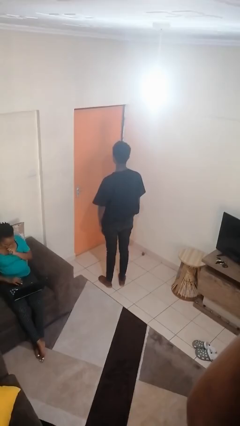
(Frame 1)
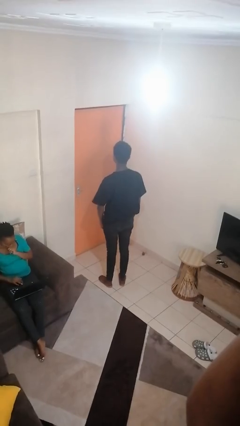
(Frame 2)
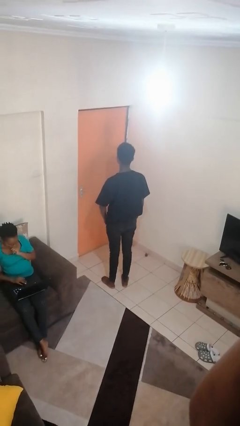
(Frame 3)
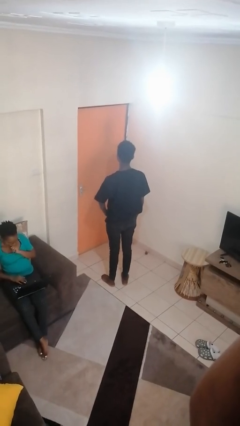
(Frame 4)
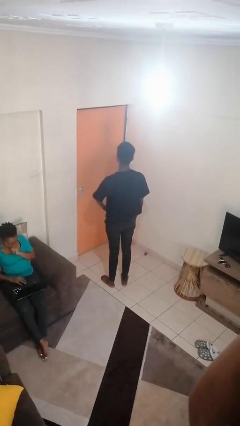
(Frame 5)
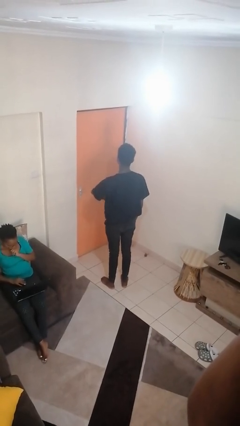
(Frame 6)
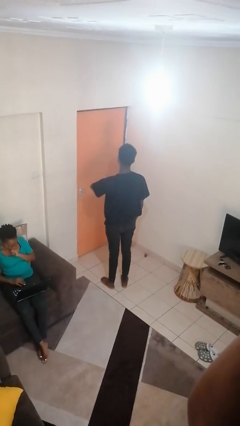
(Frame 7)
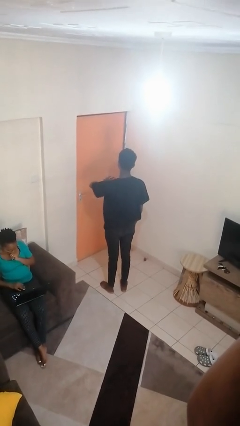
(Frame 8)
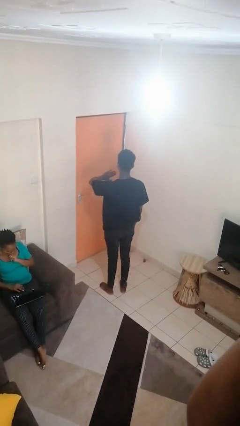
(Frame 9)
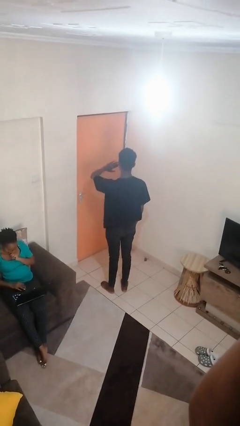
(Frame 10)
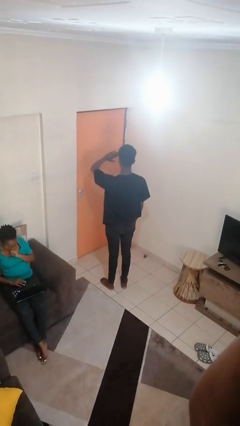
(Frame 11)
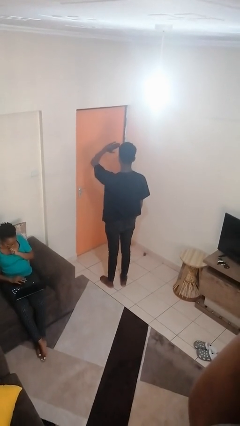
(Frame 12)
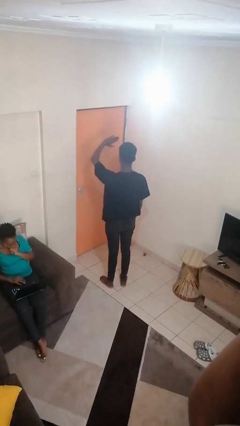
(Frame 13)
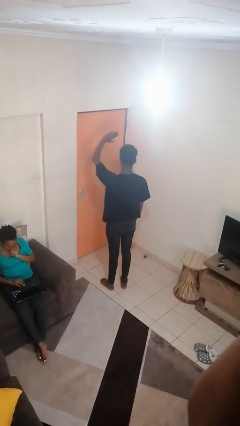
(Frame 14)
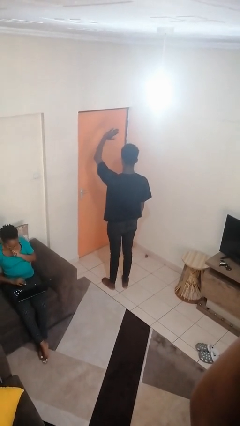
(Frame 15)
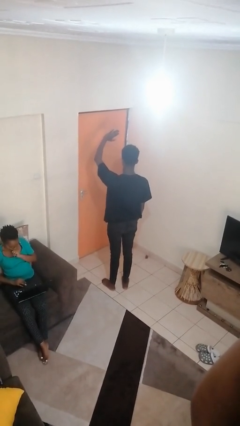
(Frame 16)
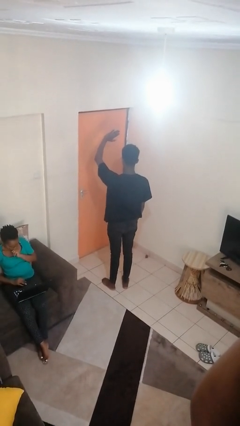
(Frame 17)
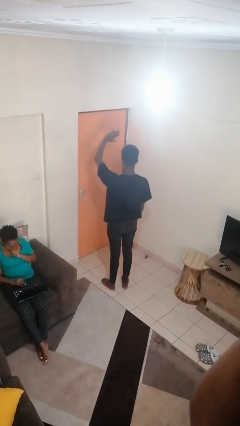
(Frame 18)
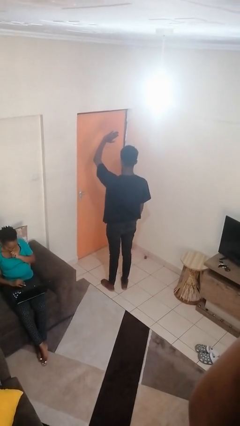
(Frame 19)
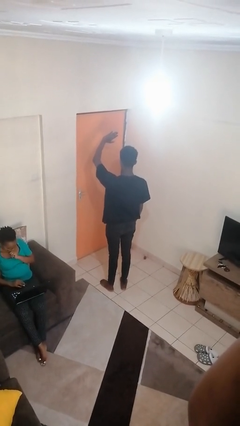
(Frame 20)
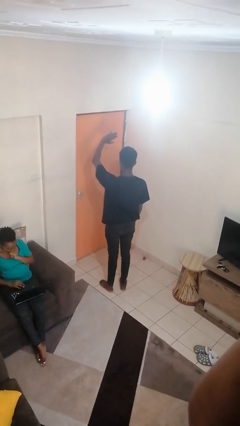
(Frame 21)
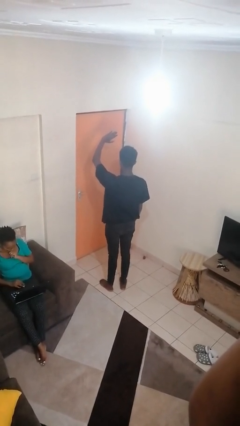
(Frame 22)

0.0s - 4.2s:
person gestures swipe up

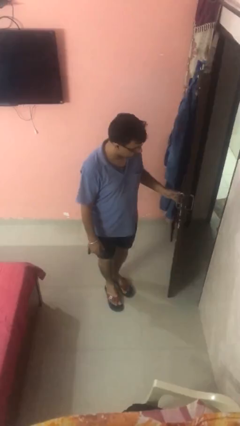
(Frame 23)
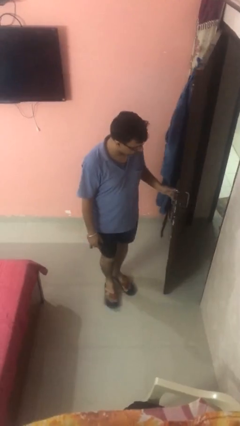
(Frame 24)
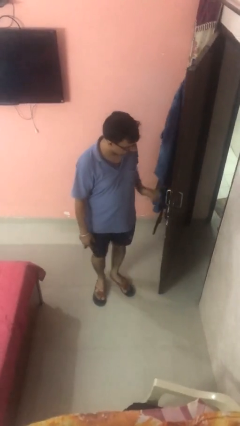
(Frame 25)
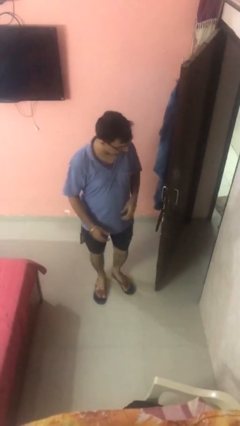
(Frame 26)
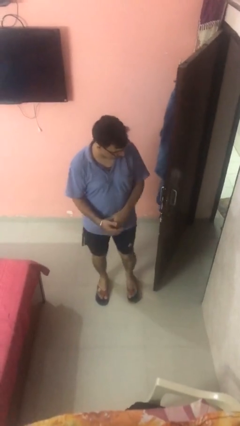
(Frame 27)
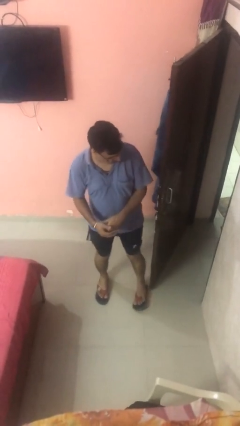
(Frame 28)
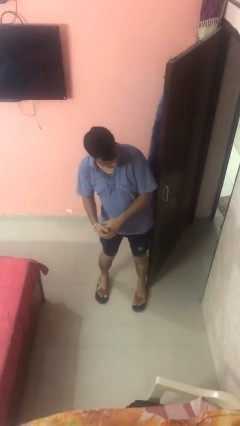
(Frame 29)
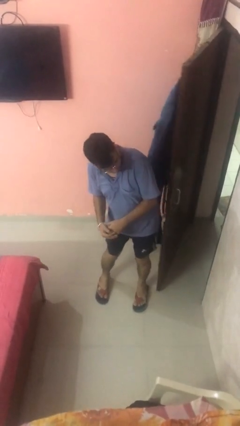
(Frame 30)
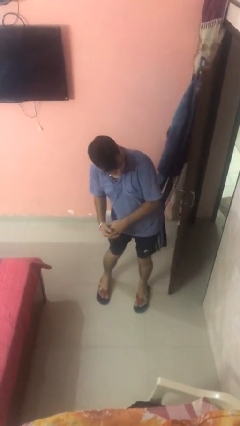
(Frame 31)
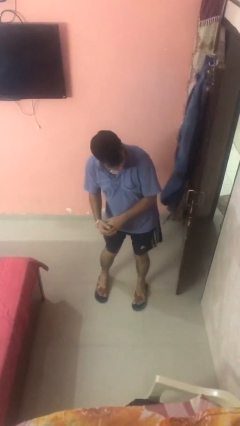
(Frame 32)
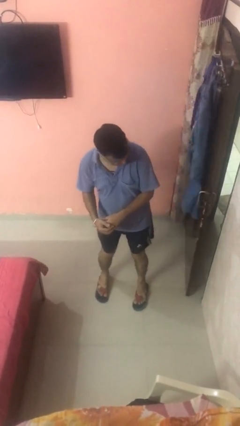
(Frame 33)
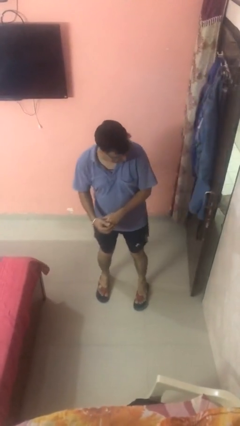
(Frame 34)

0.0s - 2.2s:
person closes door with hip

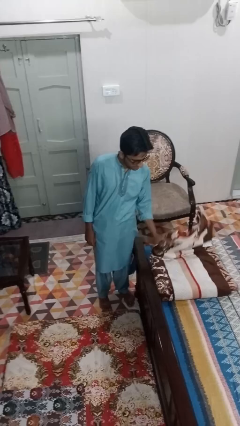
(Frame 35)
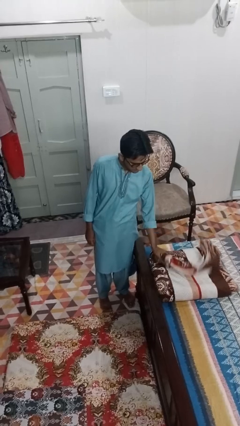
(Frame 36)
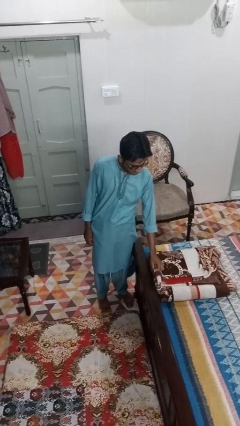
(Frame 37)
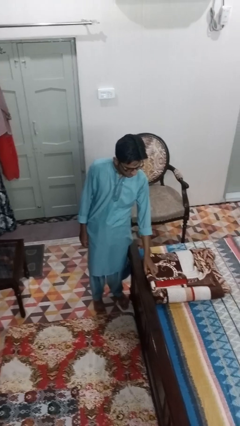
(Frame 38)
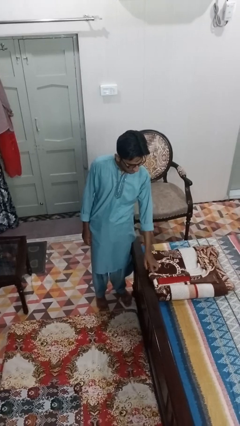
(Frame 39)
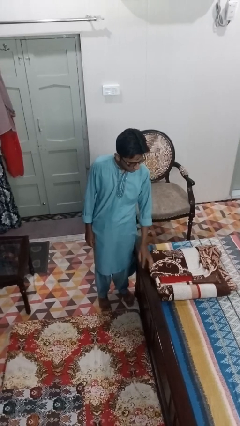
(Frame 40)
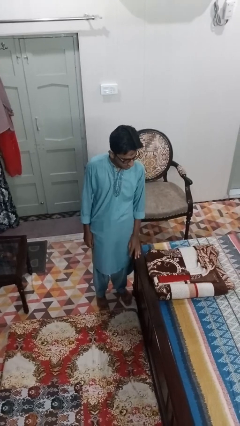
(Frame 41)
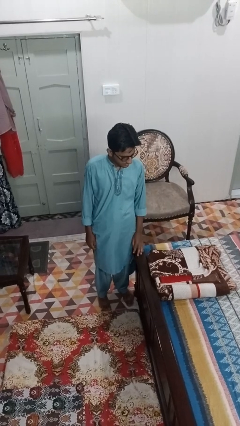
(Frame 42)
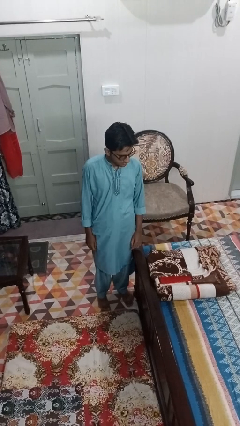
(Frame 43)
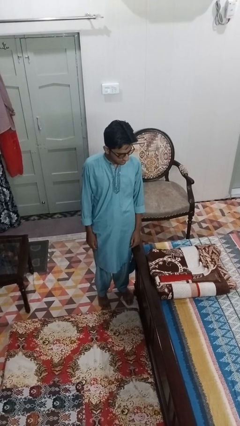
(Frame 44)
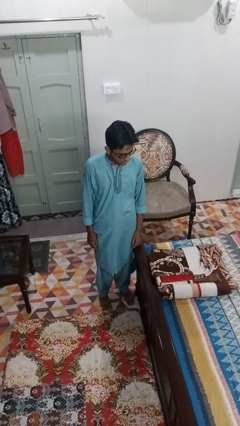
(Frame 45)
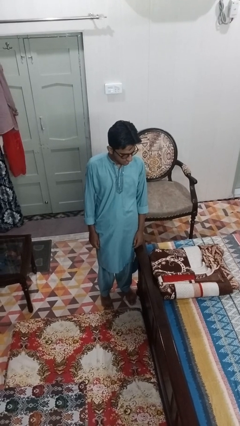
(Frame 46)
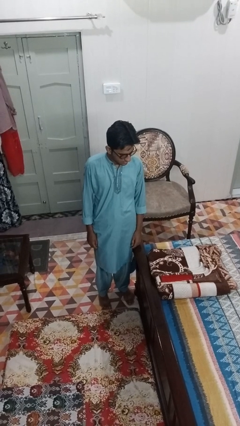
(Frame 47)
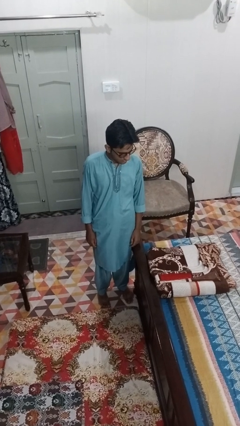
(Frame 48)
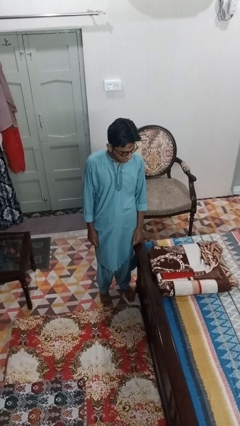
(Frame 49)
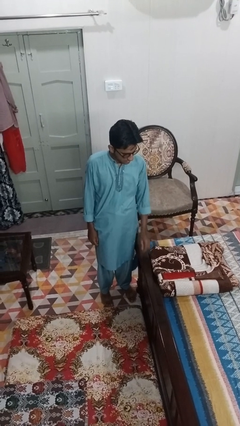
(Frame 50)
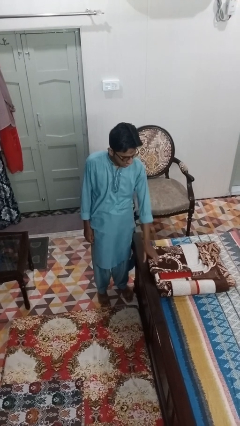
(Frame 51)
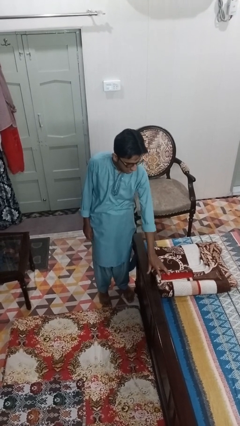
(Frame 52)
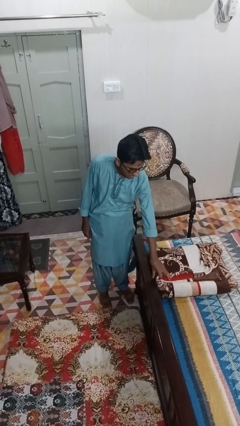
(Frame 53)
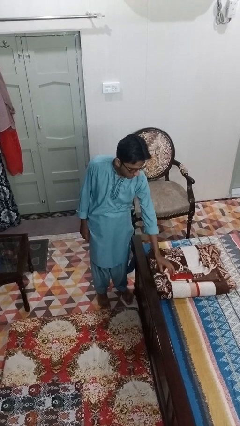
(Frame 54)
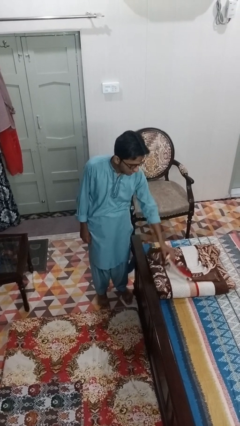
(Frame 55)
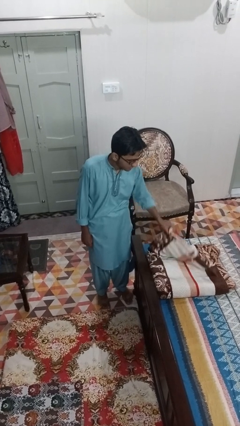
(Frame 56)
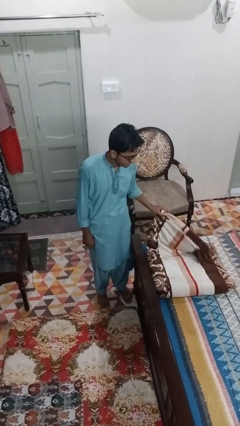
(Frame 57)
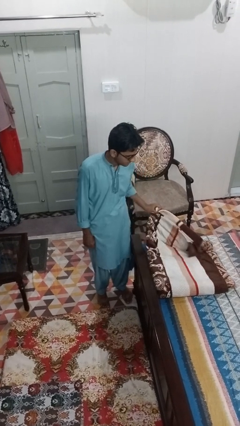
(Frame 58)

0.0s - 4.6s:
person folds blanket

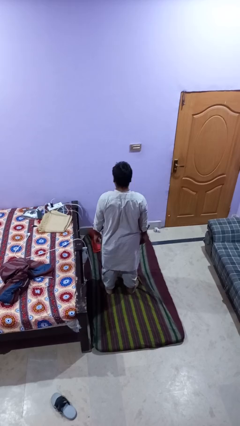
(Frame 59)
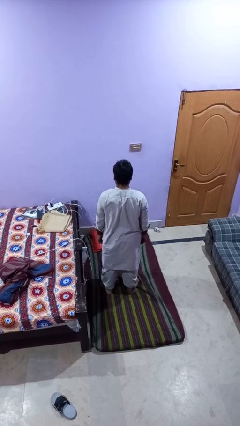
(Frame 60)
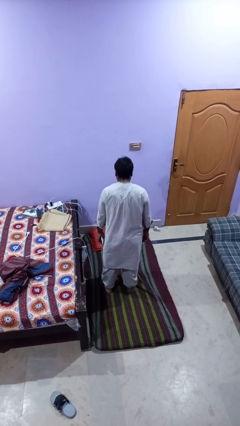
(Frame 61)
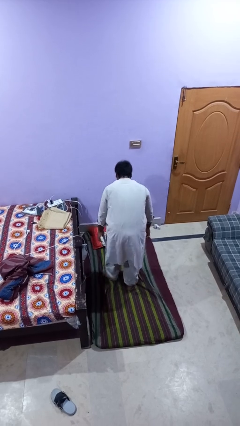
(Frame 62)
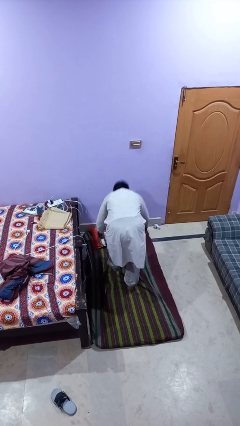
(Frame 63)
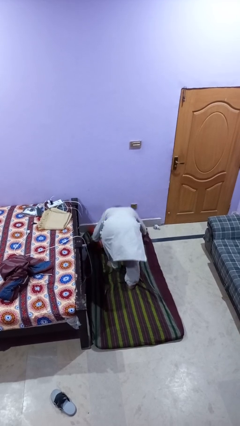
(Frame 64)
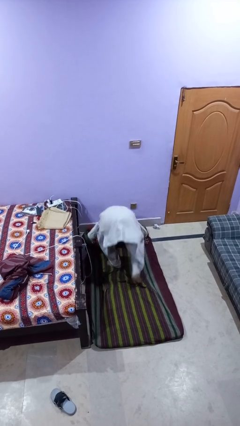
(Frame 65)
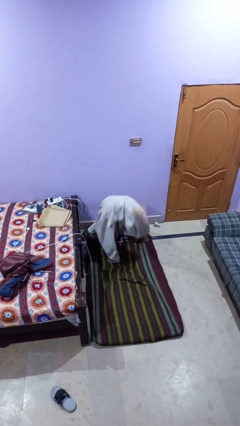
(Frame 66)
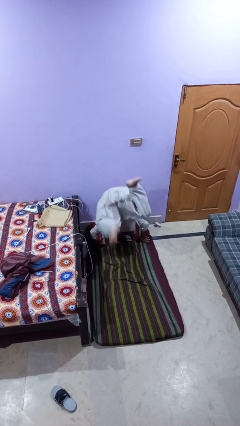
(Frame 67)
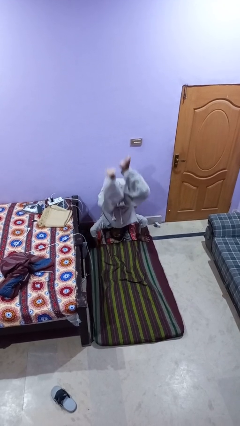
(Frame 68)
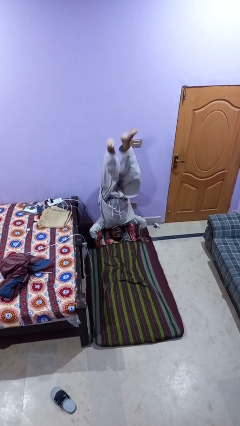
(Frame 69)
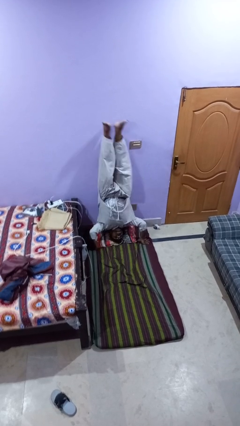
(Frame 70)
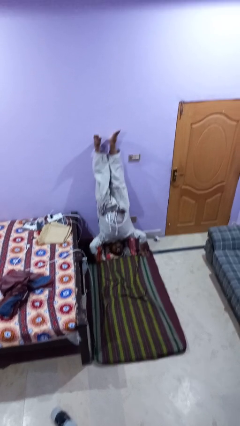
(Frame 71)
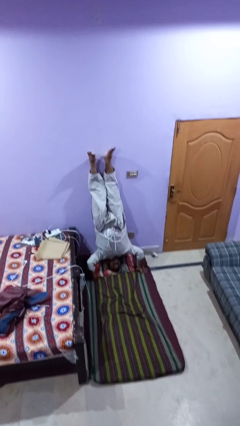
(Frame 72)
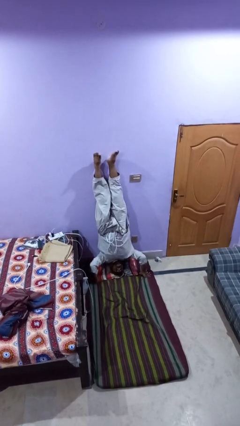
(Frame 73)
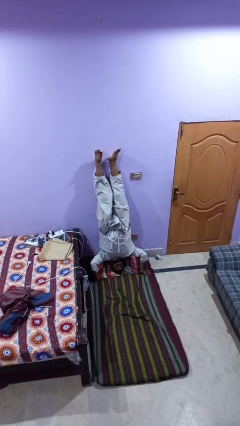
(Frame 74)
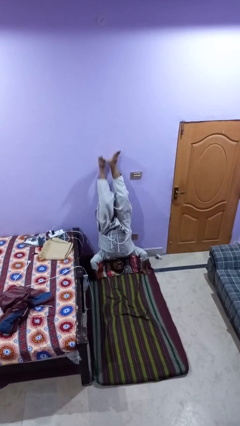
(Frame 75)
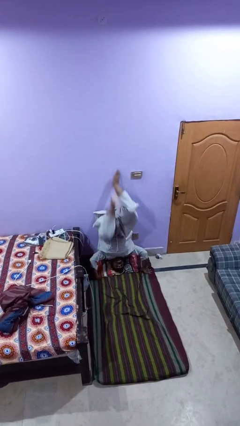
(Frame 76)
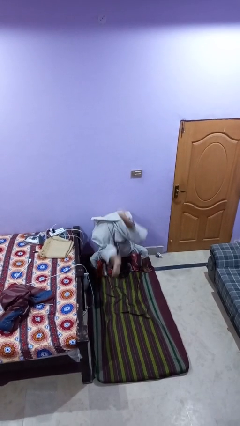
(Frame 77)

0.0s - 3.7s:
person handstand

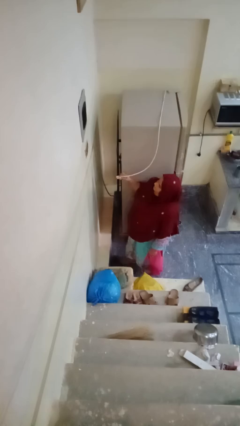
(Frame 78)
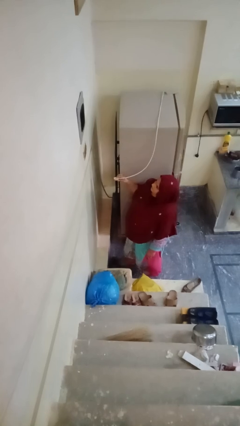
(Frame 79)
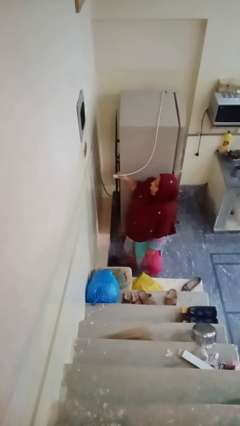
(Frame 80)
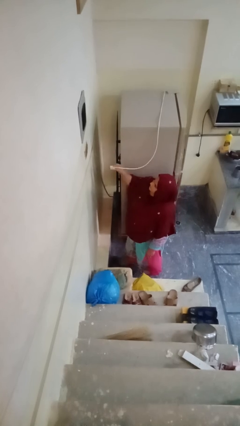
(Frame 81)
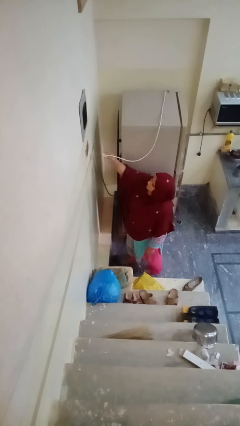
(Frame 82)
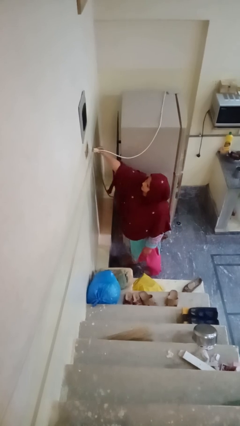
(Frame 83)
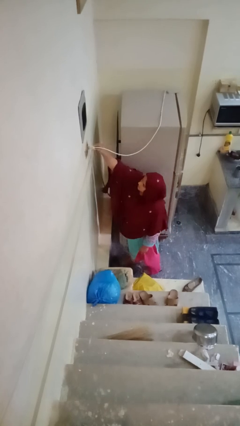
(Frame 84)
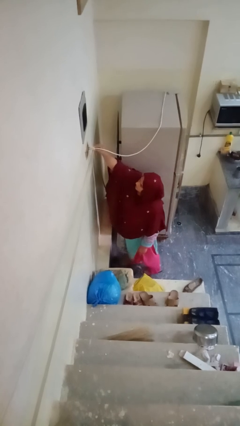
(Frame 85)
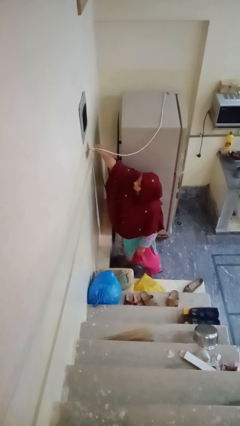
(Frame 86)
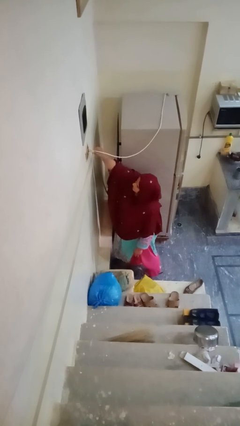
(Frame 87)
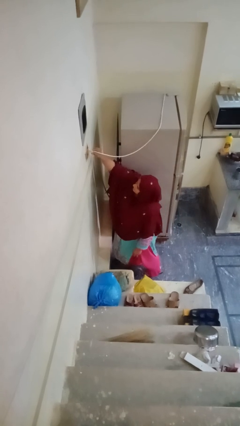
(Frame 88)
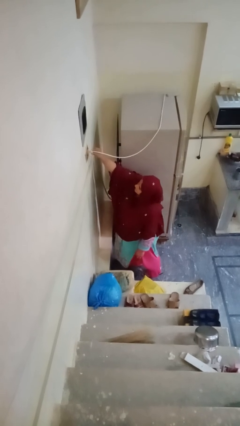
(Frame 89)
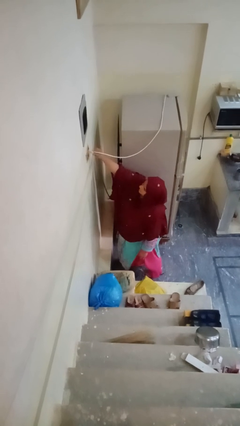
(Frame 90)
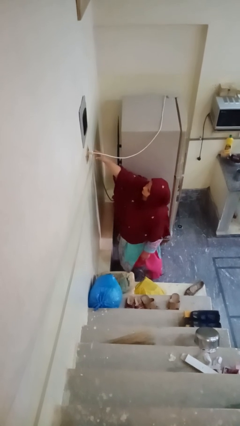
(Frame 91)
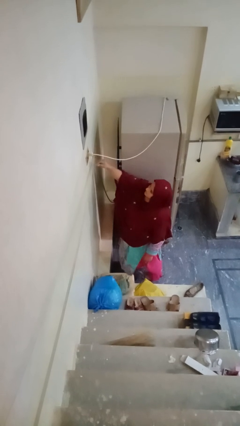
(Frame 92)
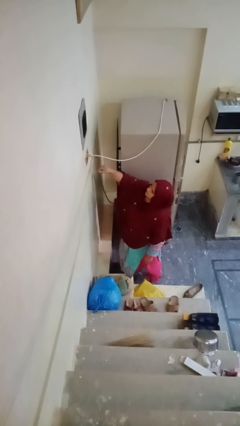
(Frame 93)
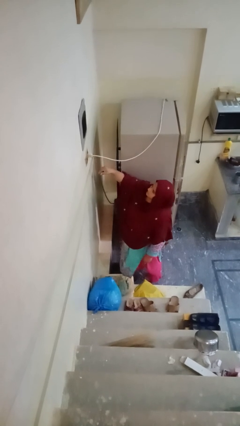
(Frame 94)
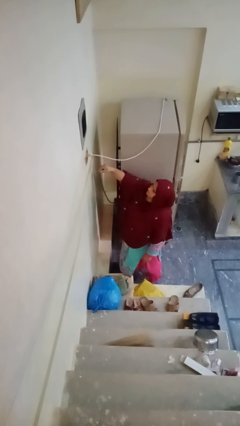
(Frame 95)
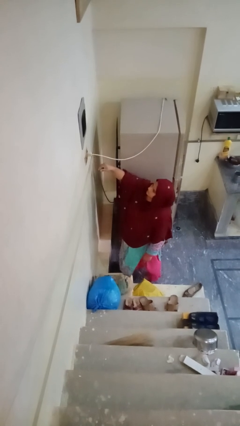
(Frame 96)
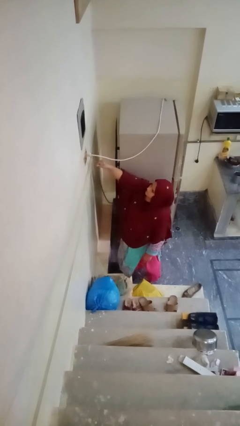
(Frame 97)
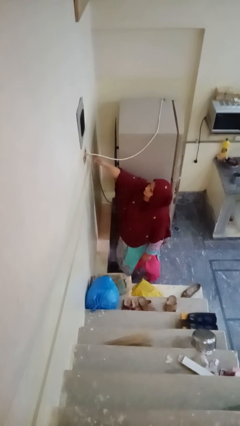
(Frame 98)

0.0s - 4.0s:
person plugs into electrical socket
